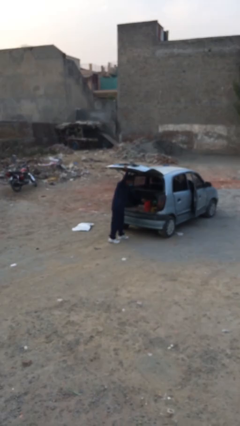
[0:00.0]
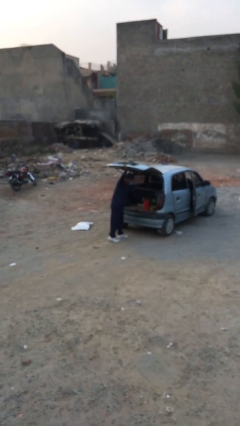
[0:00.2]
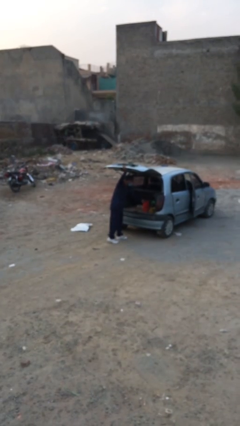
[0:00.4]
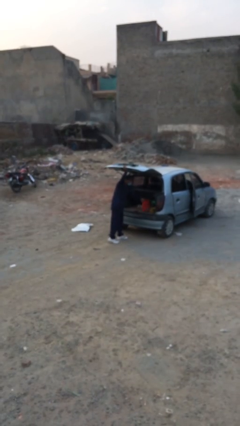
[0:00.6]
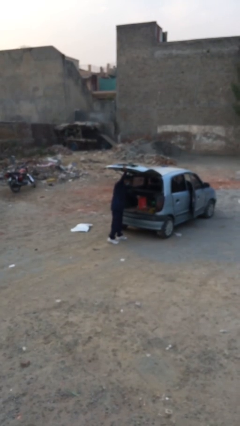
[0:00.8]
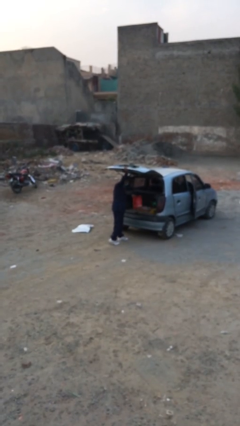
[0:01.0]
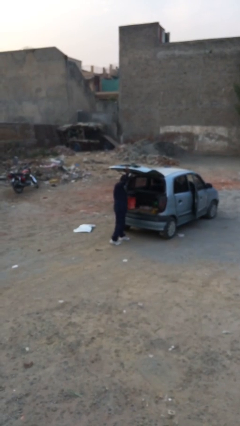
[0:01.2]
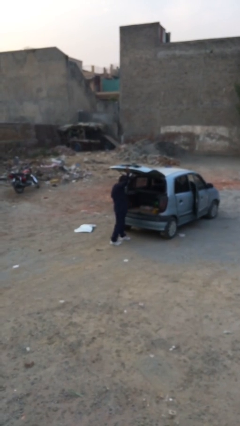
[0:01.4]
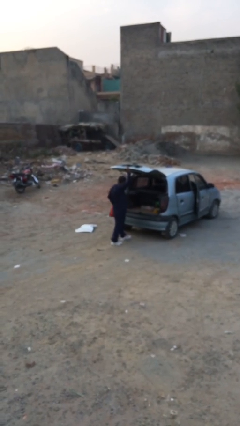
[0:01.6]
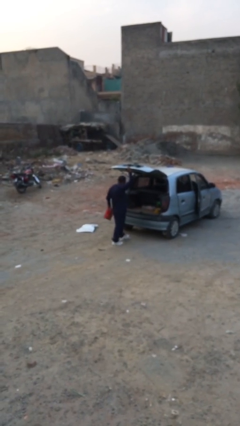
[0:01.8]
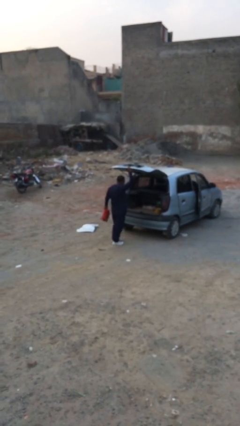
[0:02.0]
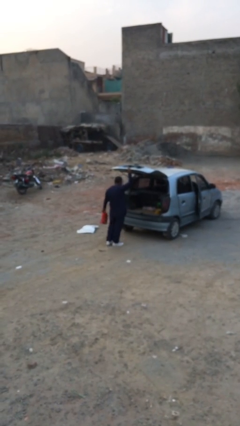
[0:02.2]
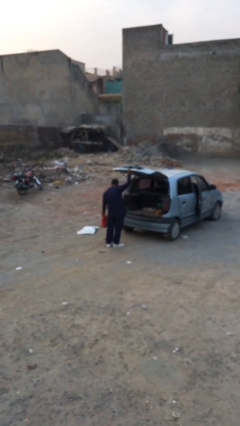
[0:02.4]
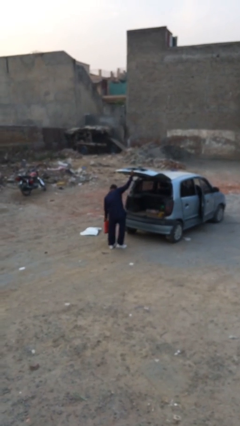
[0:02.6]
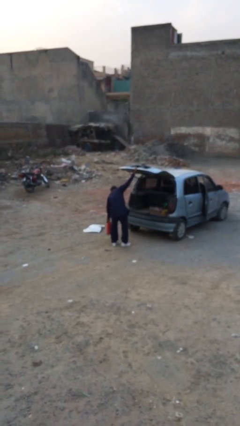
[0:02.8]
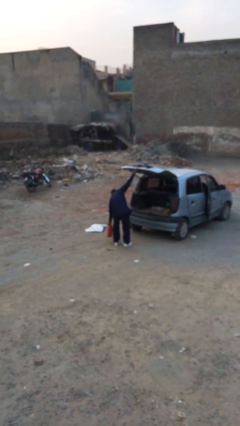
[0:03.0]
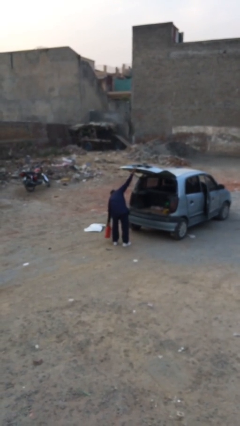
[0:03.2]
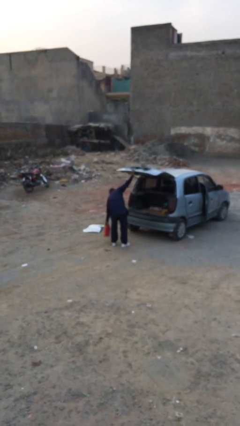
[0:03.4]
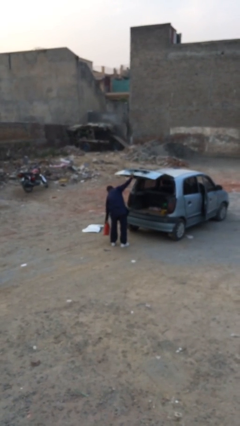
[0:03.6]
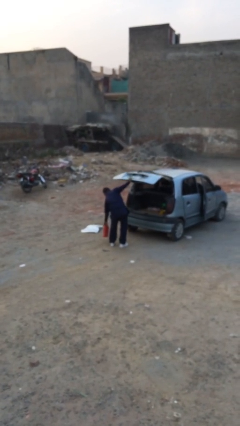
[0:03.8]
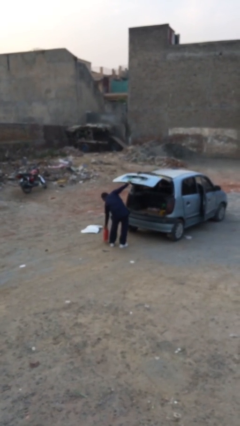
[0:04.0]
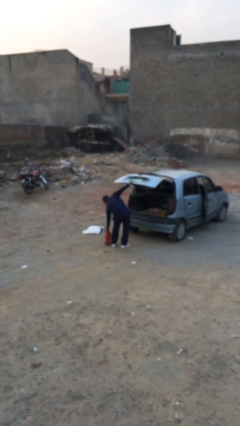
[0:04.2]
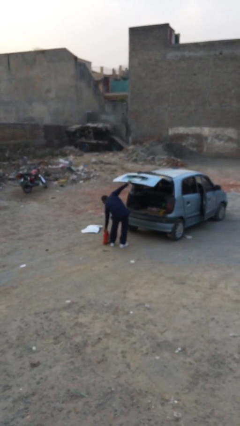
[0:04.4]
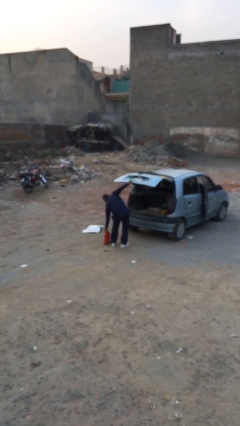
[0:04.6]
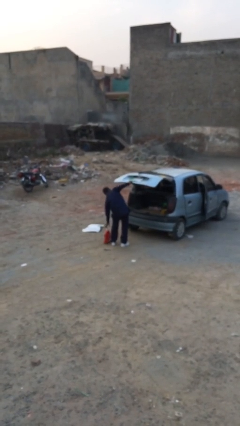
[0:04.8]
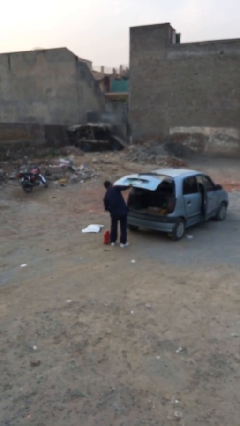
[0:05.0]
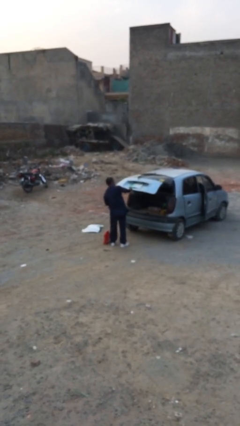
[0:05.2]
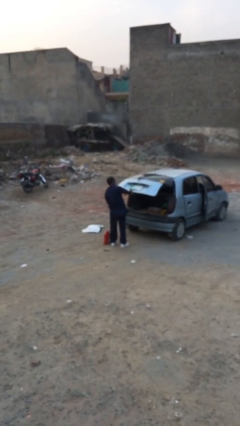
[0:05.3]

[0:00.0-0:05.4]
person unloads car

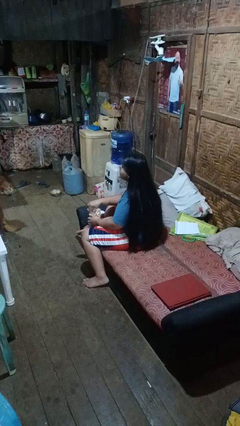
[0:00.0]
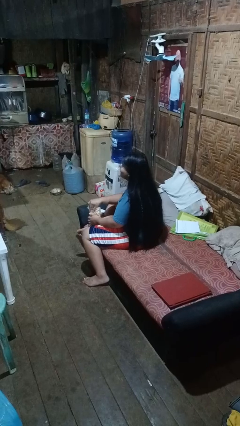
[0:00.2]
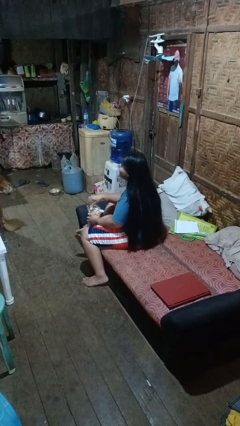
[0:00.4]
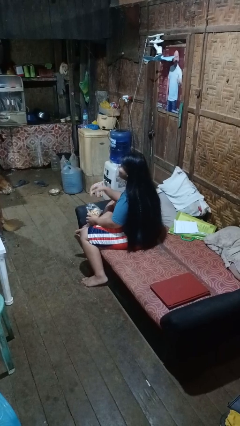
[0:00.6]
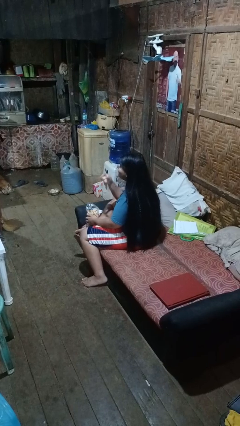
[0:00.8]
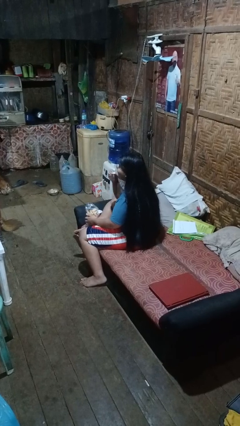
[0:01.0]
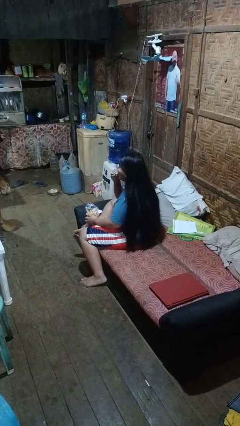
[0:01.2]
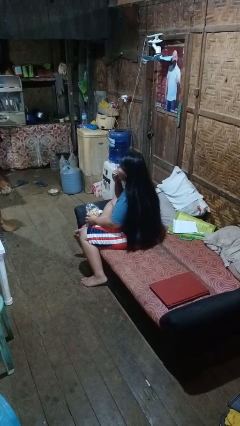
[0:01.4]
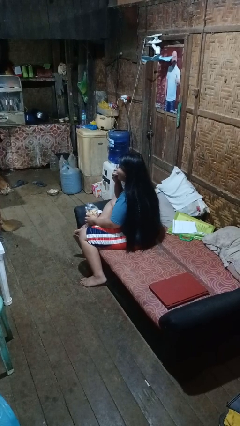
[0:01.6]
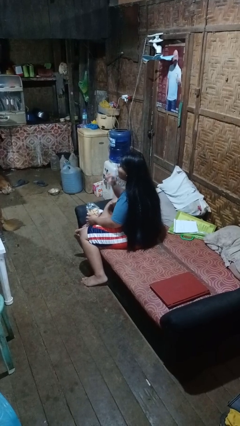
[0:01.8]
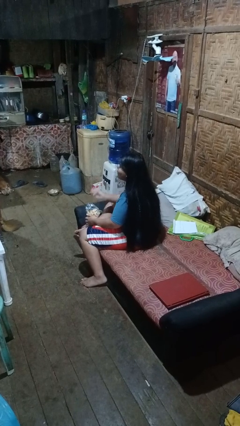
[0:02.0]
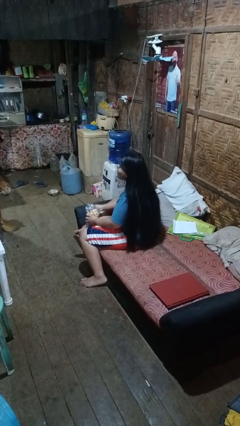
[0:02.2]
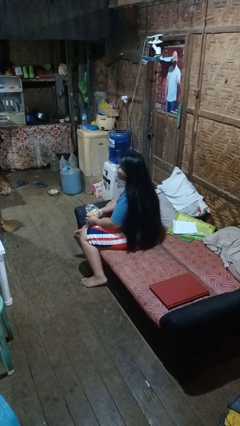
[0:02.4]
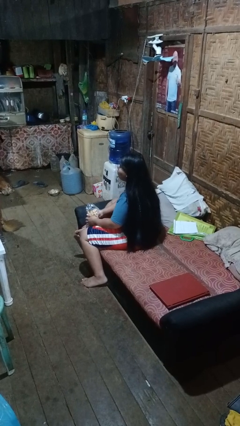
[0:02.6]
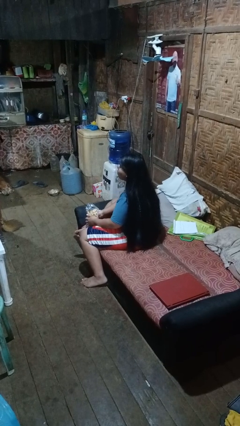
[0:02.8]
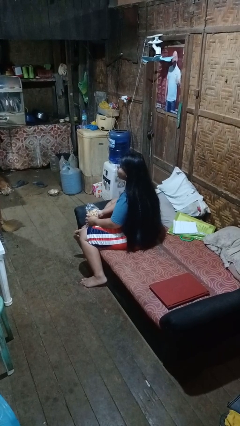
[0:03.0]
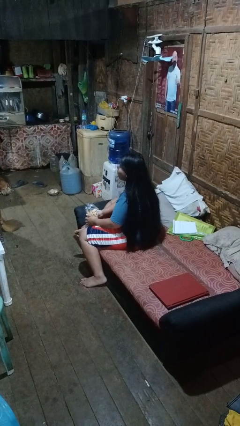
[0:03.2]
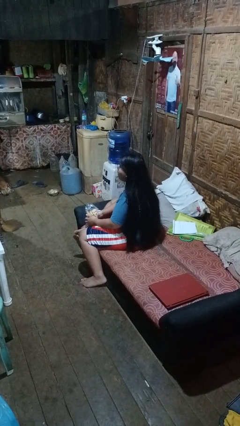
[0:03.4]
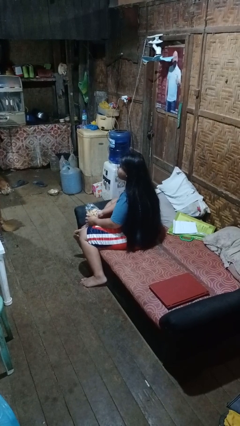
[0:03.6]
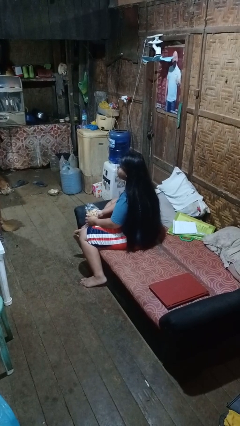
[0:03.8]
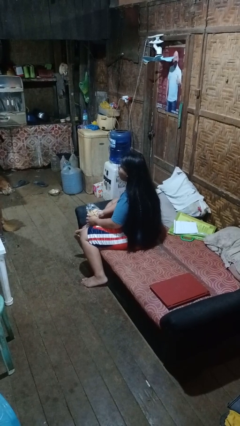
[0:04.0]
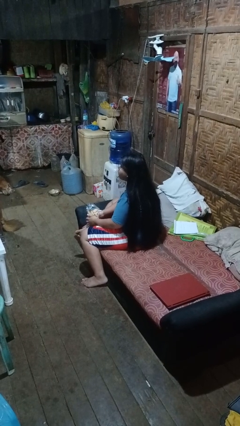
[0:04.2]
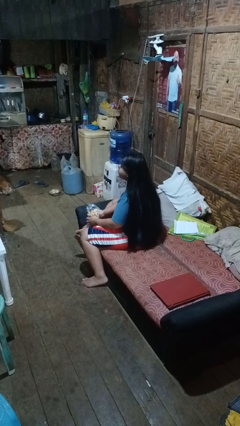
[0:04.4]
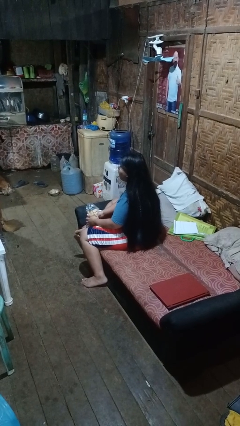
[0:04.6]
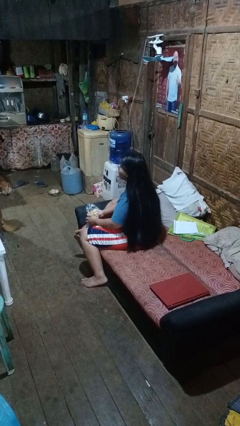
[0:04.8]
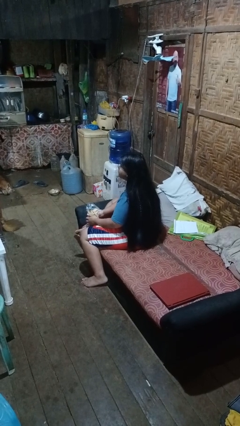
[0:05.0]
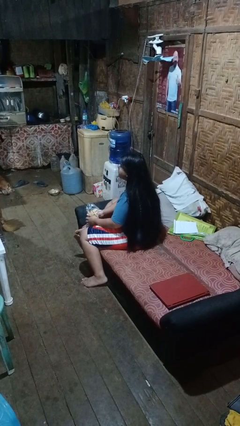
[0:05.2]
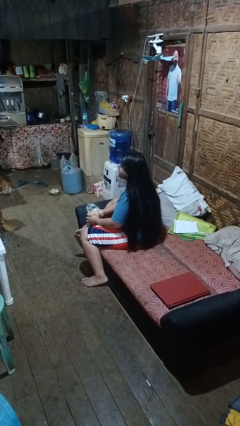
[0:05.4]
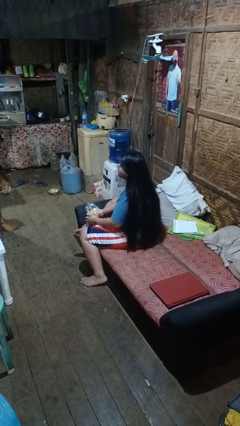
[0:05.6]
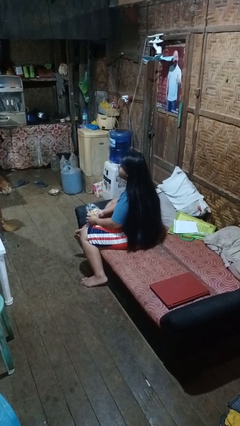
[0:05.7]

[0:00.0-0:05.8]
person eats snack from bag

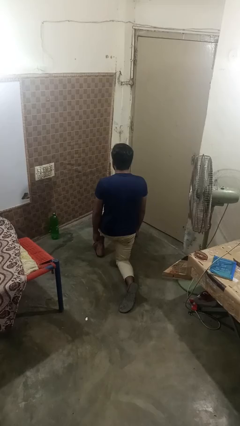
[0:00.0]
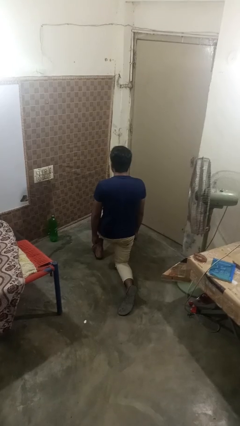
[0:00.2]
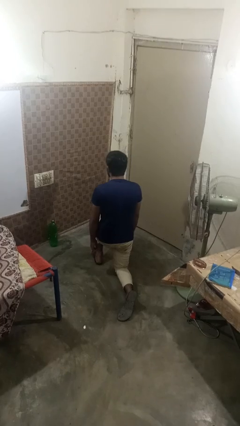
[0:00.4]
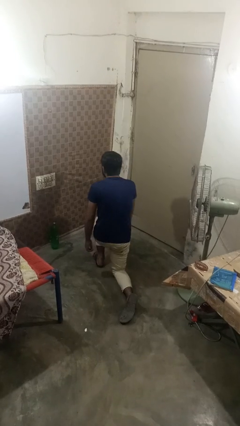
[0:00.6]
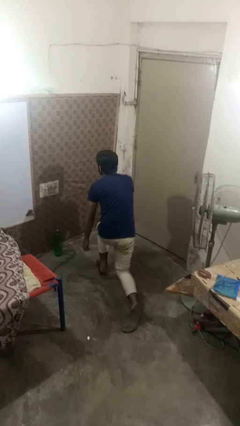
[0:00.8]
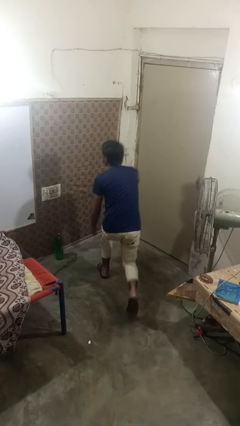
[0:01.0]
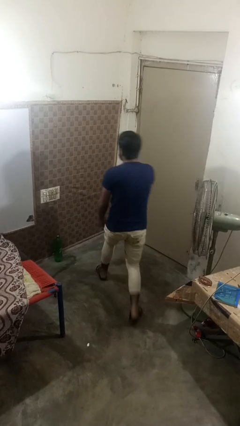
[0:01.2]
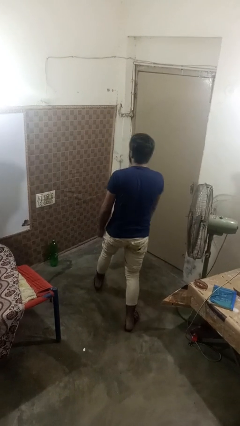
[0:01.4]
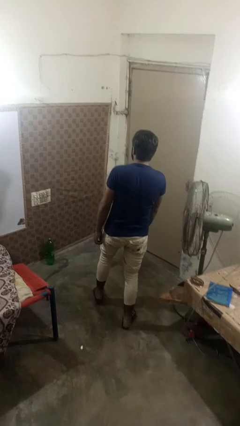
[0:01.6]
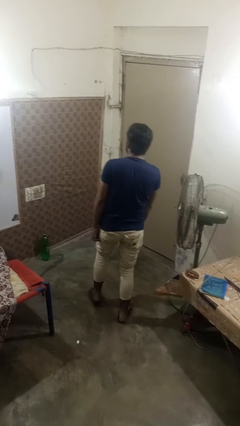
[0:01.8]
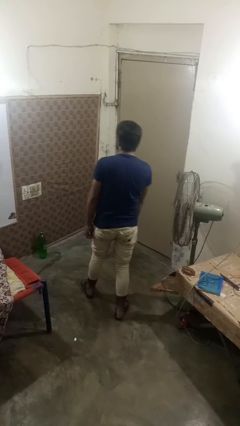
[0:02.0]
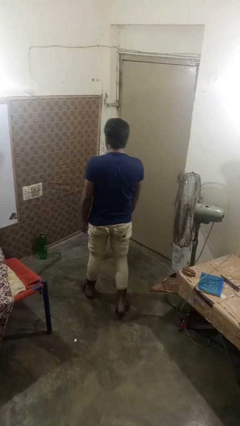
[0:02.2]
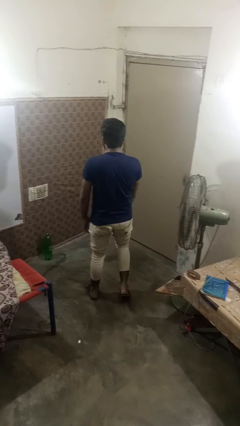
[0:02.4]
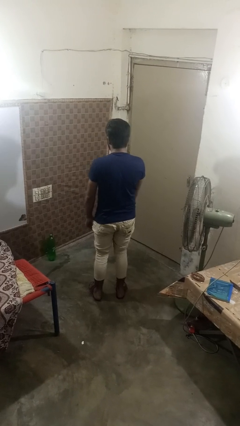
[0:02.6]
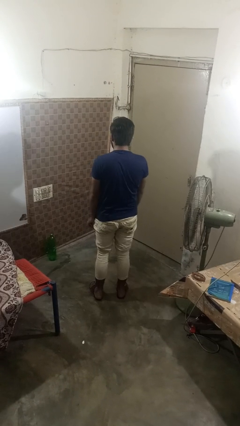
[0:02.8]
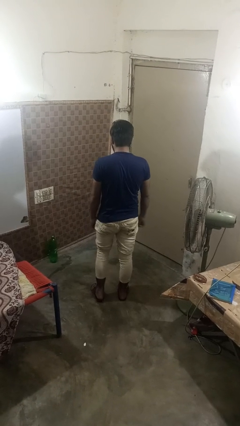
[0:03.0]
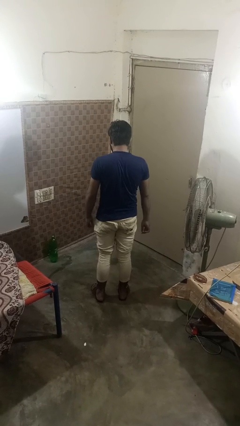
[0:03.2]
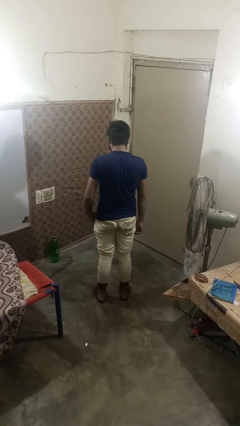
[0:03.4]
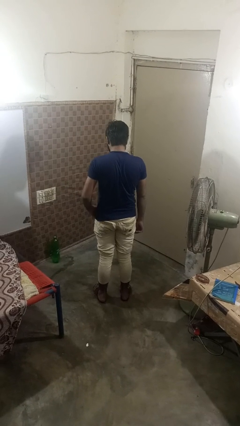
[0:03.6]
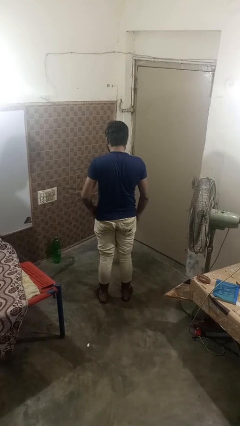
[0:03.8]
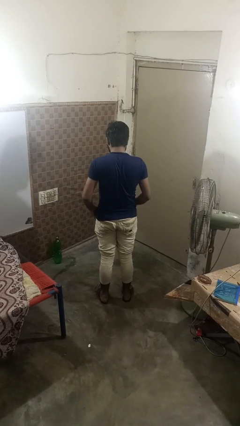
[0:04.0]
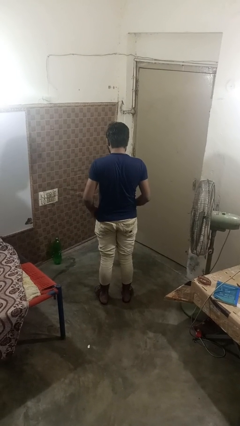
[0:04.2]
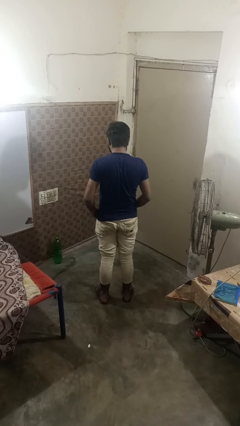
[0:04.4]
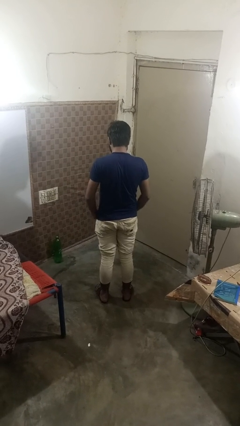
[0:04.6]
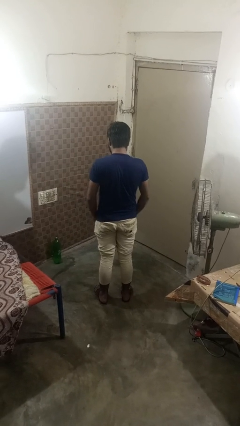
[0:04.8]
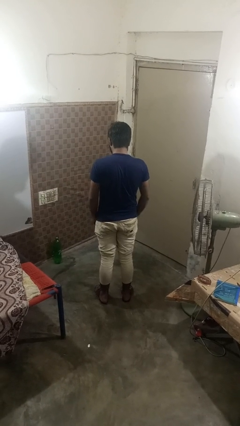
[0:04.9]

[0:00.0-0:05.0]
person stands up from floor

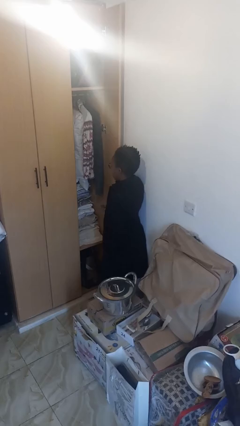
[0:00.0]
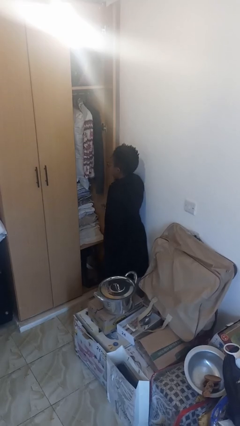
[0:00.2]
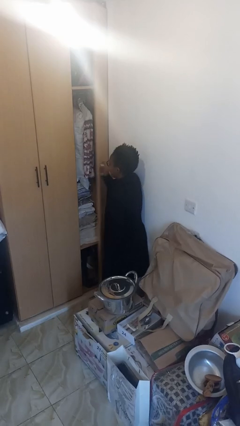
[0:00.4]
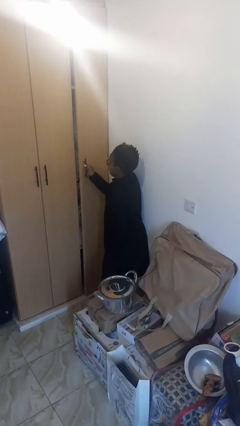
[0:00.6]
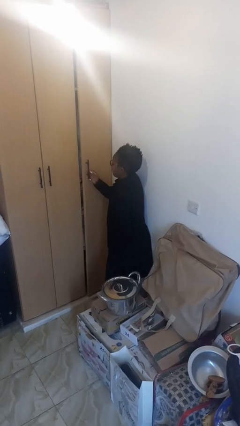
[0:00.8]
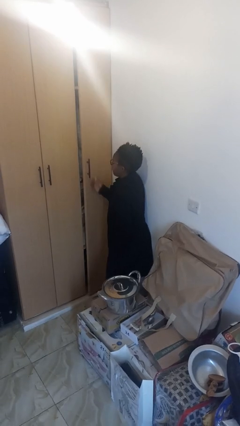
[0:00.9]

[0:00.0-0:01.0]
person closes closet door

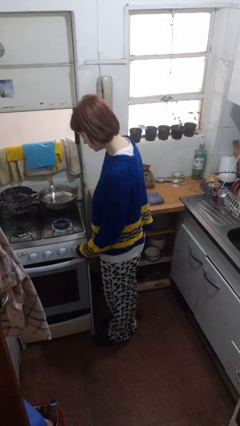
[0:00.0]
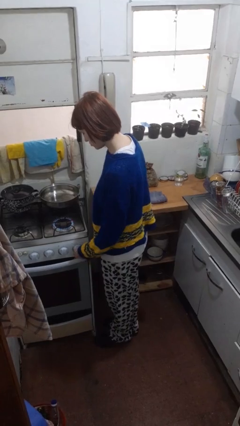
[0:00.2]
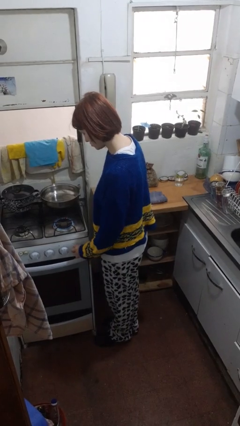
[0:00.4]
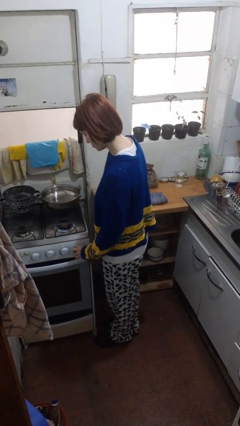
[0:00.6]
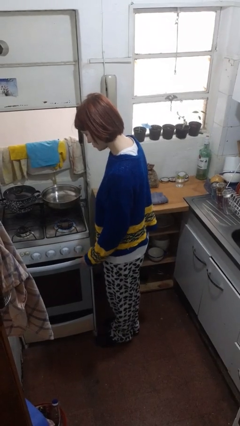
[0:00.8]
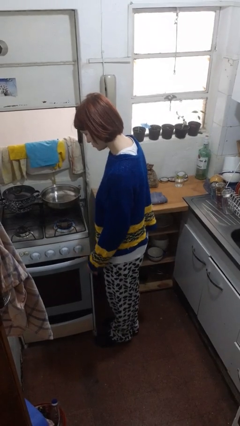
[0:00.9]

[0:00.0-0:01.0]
person turns off stovetop
